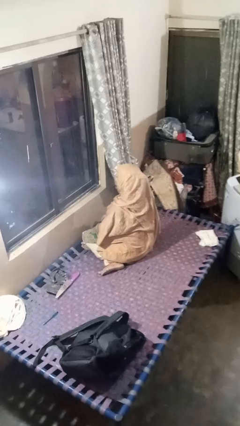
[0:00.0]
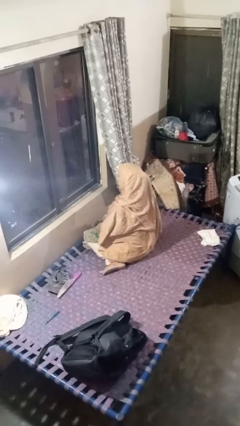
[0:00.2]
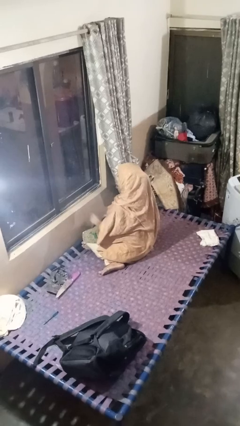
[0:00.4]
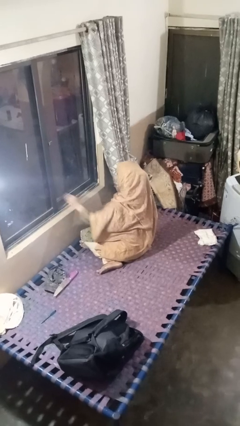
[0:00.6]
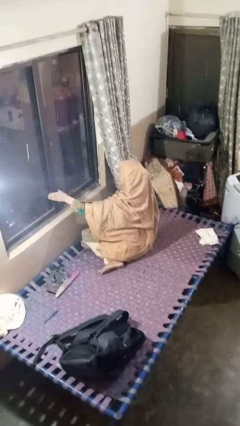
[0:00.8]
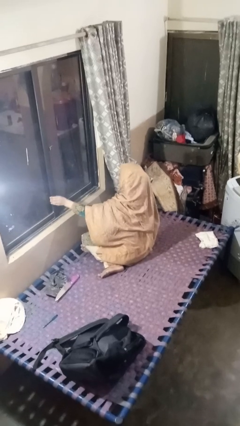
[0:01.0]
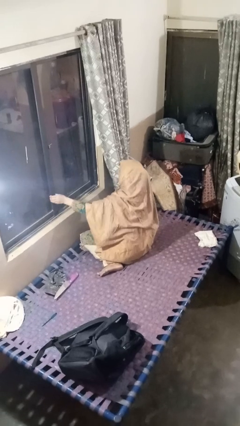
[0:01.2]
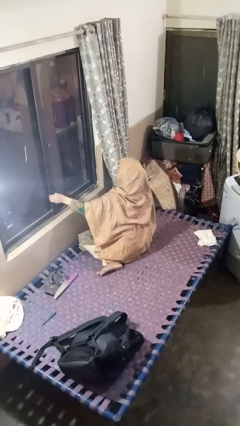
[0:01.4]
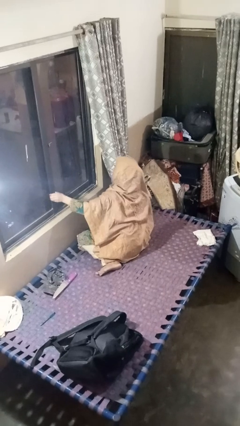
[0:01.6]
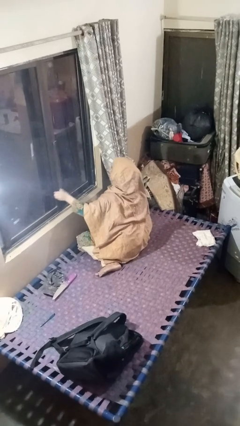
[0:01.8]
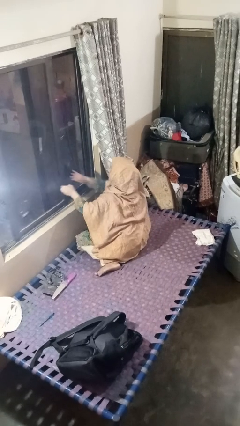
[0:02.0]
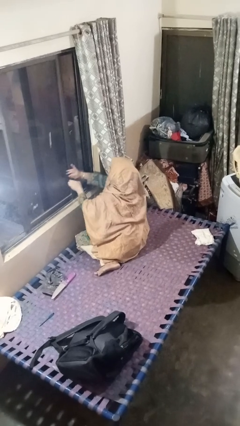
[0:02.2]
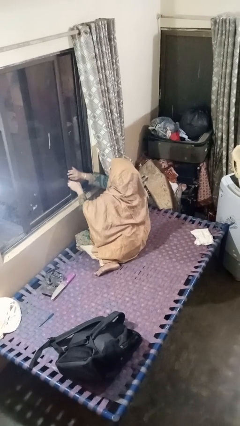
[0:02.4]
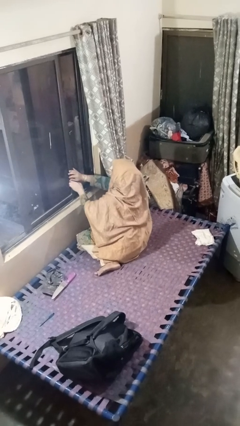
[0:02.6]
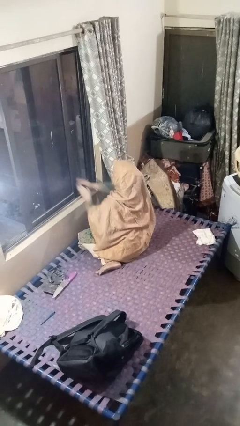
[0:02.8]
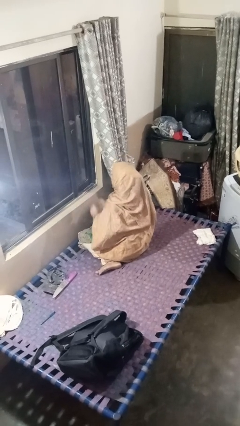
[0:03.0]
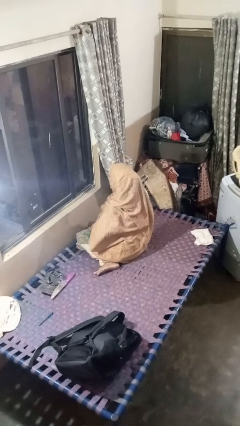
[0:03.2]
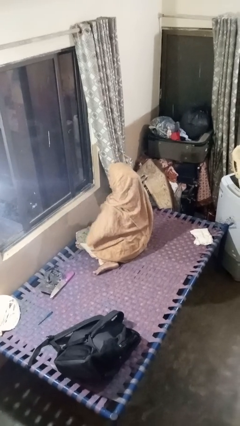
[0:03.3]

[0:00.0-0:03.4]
person opens home window

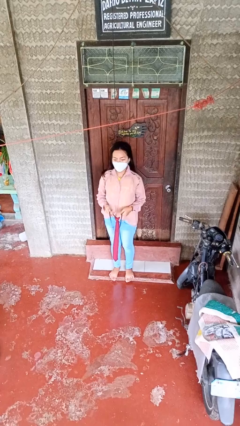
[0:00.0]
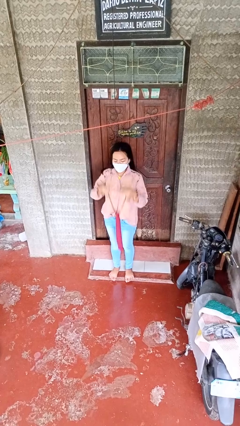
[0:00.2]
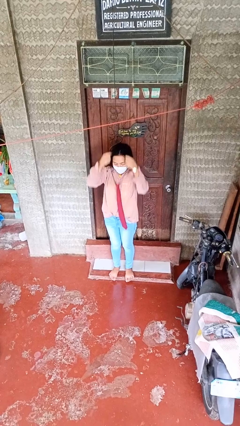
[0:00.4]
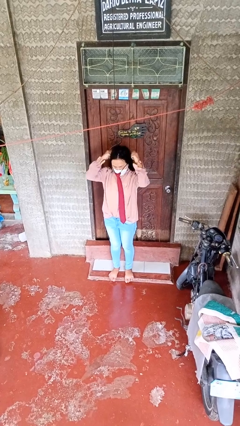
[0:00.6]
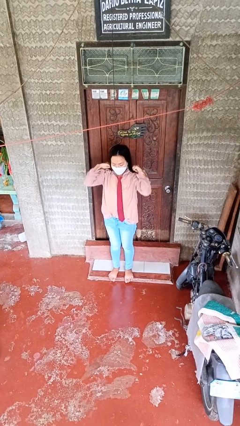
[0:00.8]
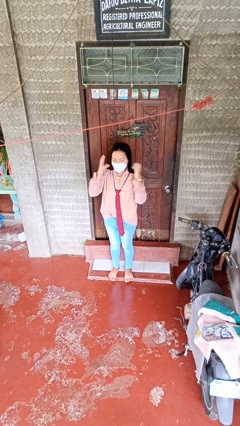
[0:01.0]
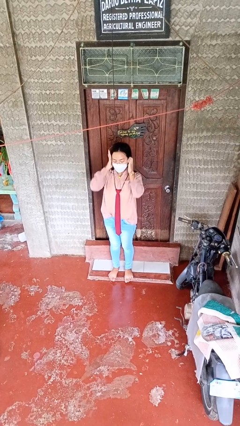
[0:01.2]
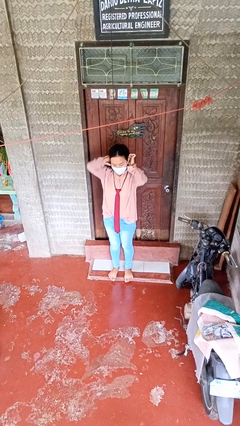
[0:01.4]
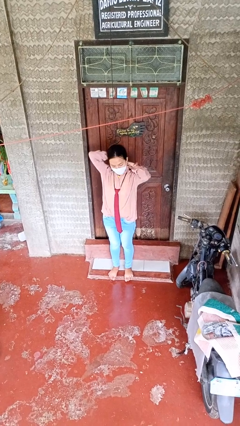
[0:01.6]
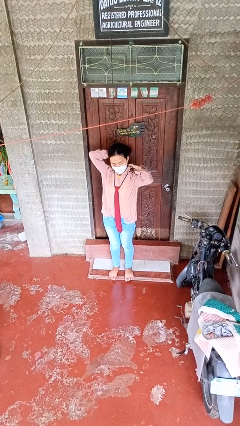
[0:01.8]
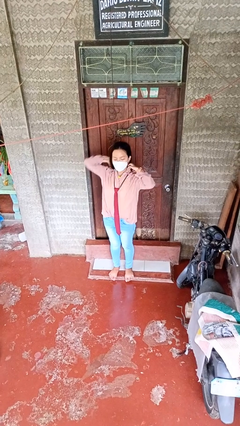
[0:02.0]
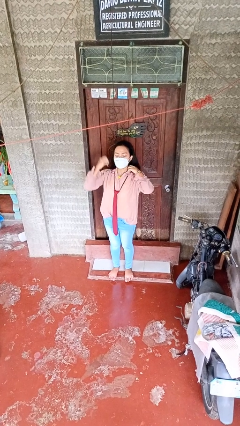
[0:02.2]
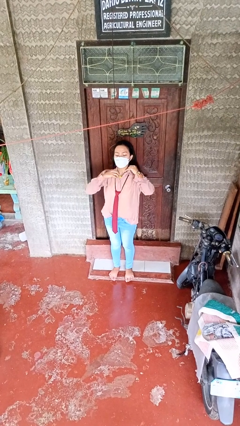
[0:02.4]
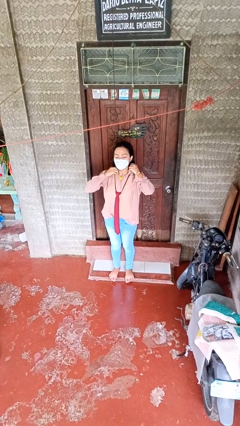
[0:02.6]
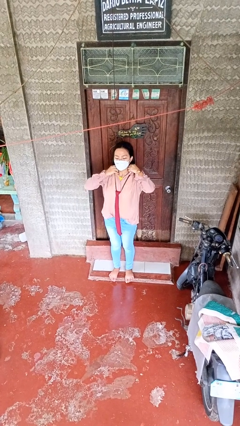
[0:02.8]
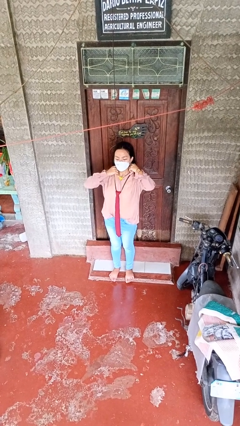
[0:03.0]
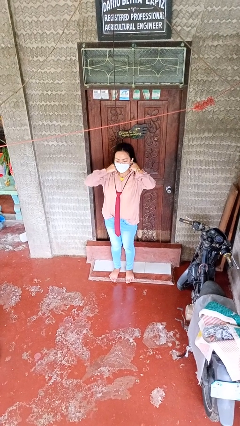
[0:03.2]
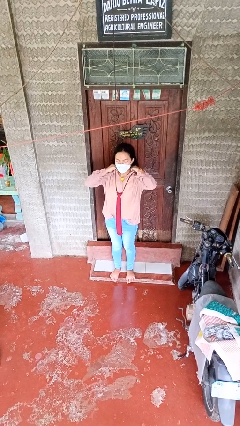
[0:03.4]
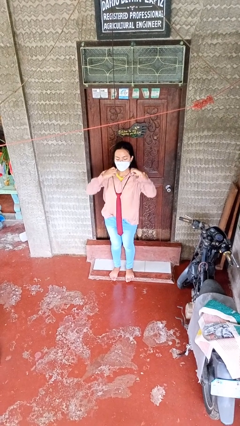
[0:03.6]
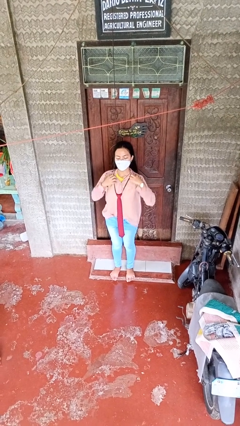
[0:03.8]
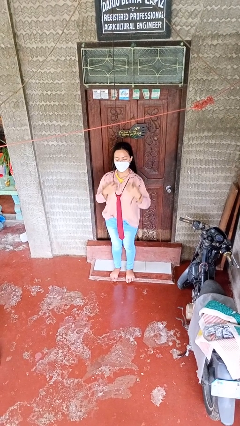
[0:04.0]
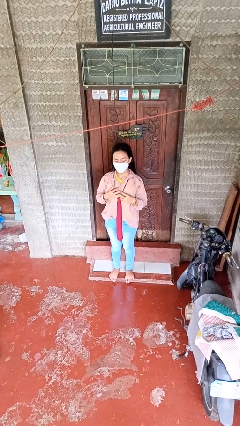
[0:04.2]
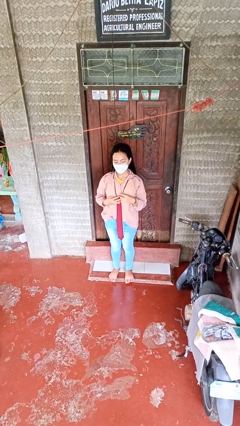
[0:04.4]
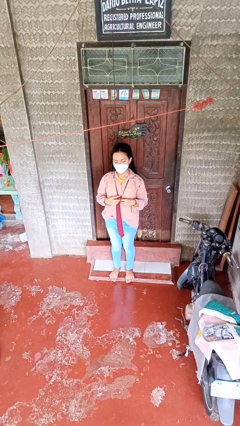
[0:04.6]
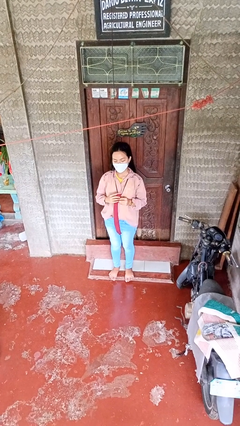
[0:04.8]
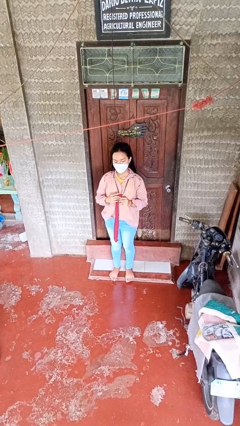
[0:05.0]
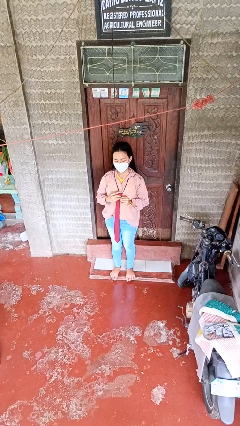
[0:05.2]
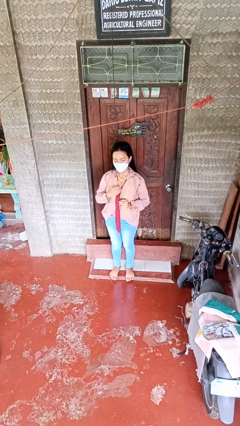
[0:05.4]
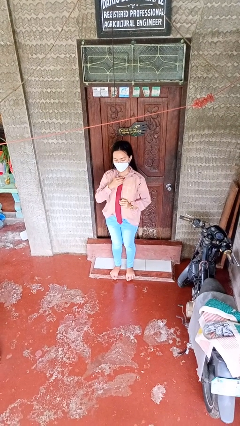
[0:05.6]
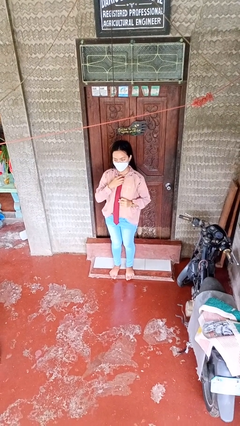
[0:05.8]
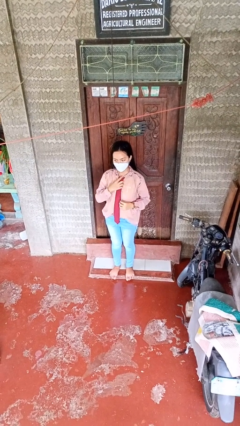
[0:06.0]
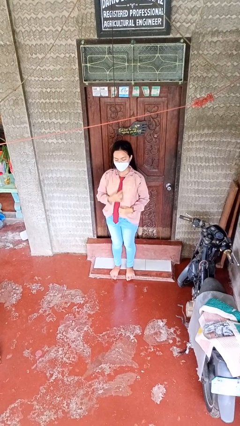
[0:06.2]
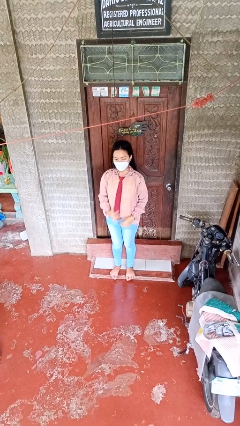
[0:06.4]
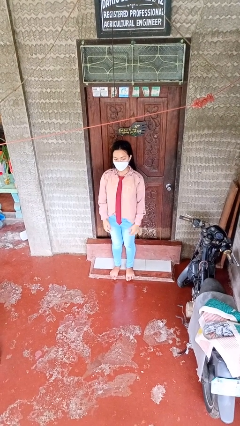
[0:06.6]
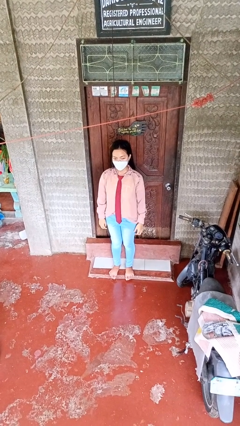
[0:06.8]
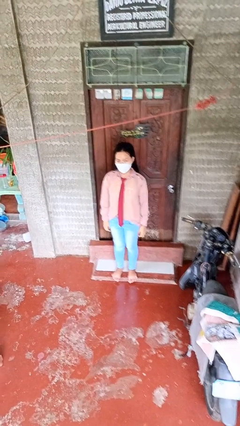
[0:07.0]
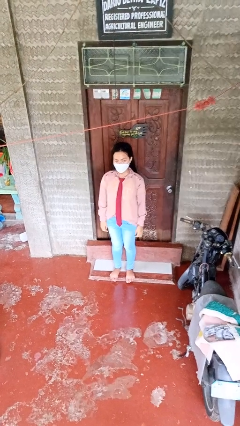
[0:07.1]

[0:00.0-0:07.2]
person puts on necktie

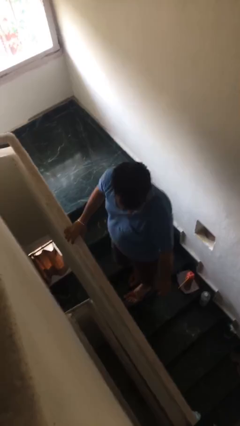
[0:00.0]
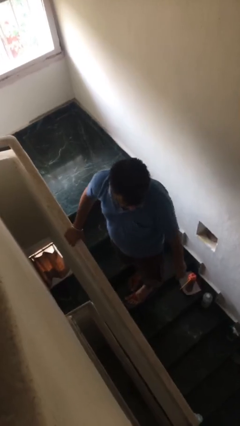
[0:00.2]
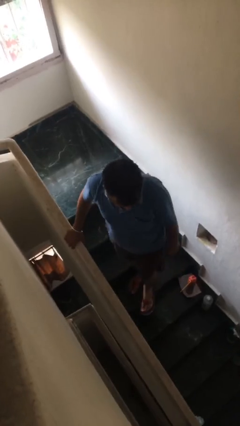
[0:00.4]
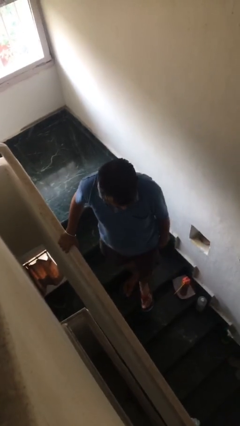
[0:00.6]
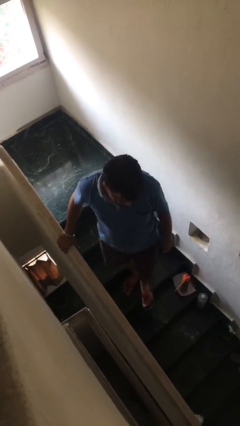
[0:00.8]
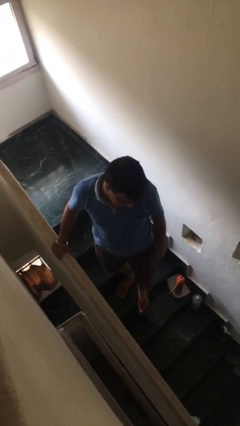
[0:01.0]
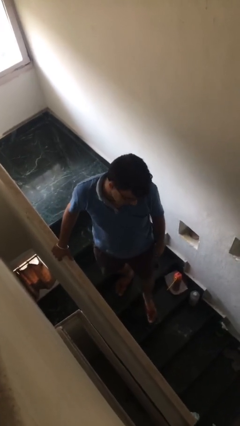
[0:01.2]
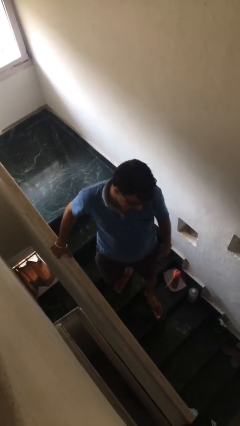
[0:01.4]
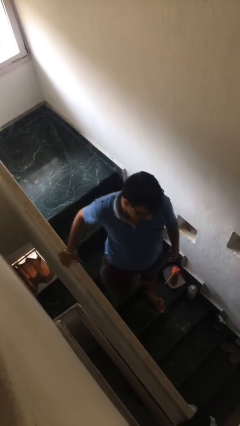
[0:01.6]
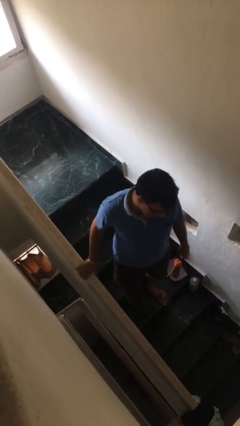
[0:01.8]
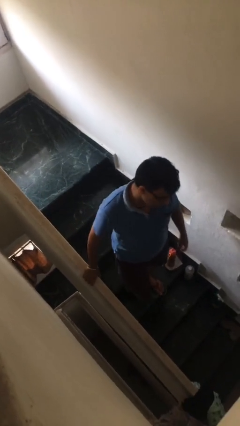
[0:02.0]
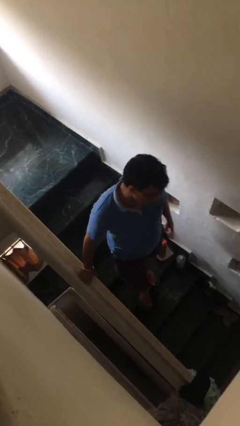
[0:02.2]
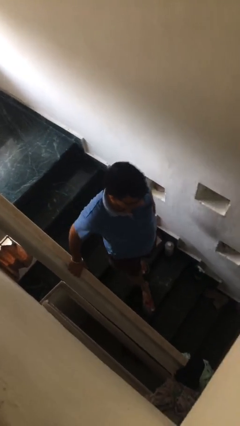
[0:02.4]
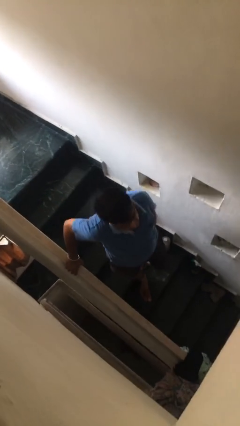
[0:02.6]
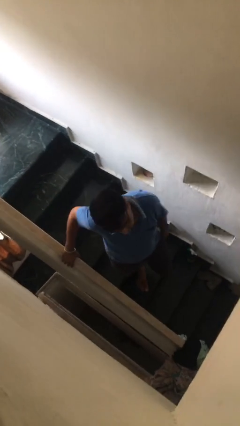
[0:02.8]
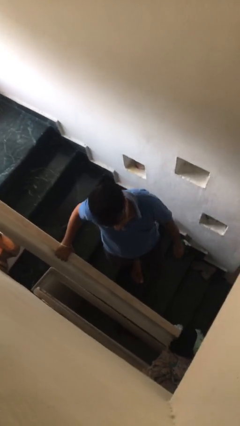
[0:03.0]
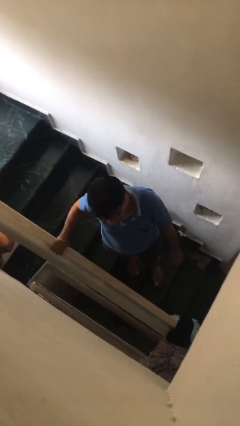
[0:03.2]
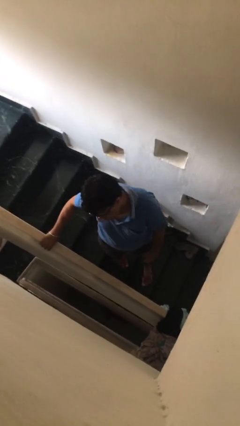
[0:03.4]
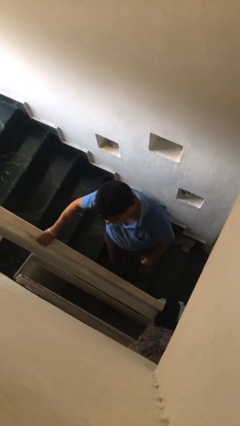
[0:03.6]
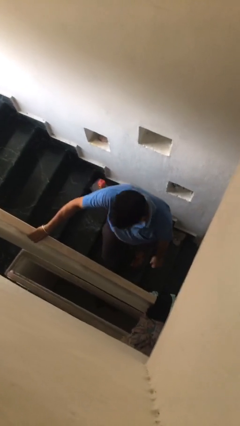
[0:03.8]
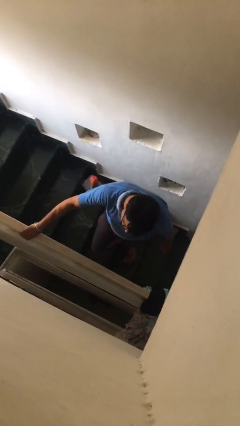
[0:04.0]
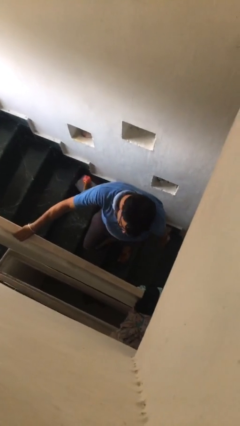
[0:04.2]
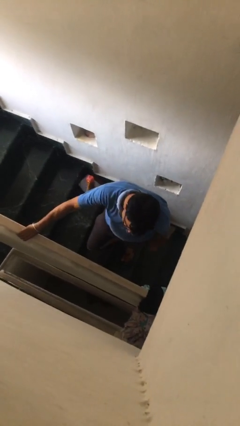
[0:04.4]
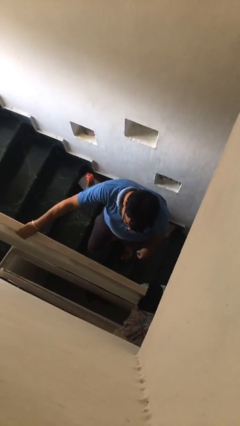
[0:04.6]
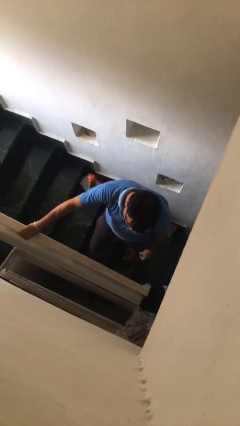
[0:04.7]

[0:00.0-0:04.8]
person climbs down stairs

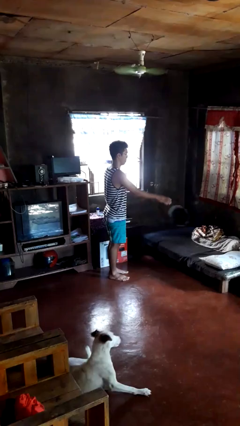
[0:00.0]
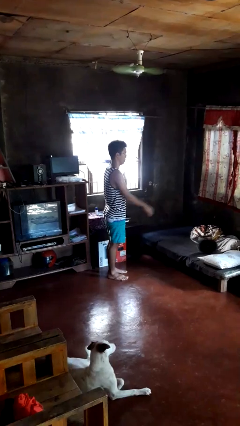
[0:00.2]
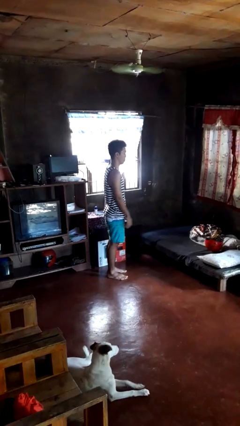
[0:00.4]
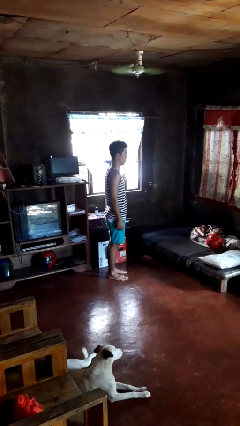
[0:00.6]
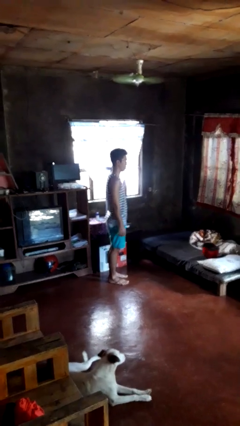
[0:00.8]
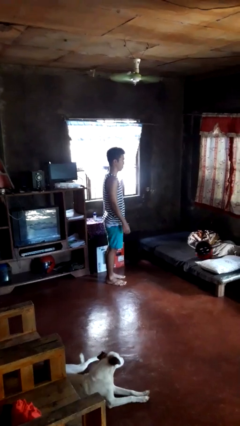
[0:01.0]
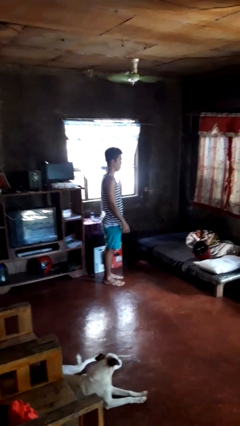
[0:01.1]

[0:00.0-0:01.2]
person throws object on bed

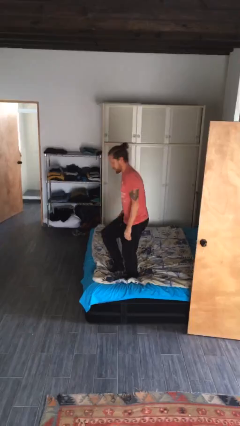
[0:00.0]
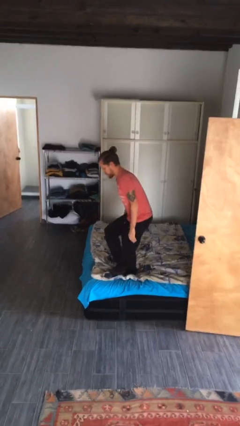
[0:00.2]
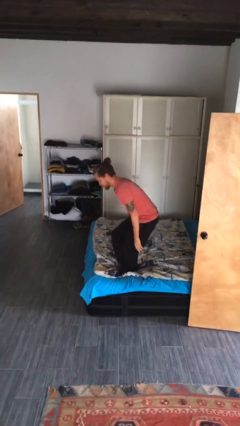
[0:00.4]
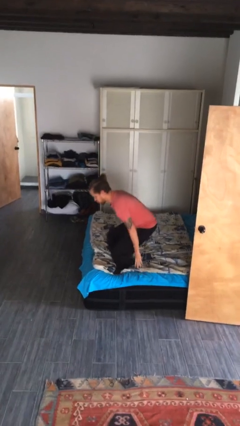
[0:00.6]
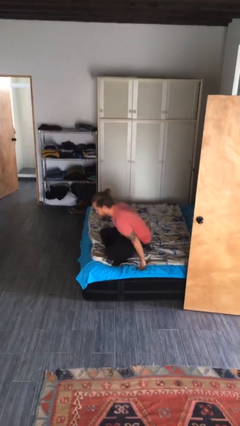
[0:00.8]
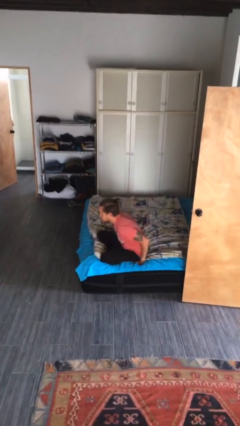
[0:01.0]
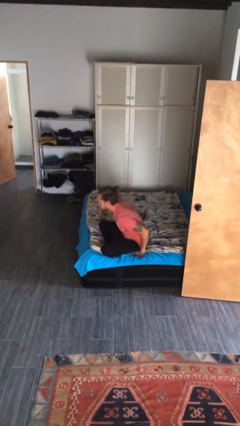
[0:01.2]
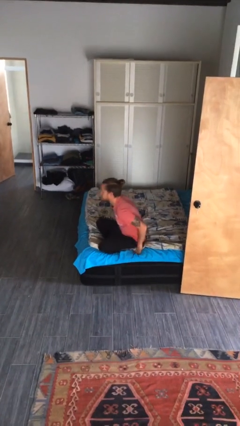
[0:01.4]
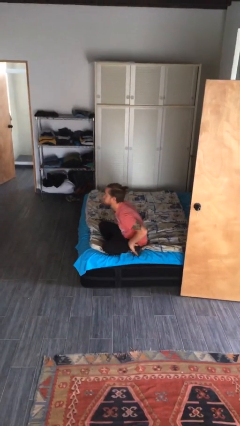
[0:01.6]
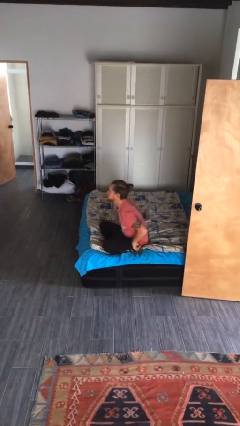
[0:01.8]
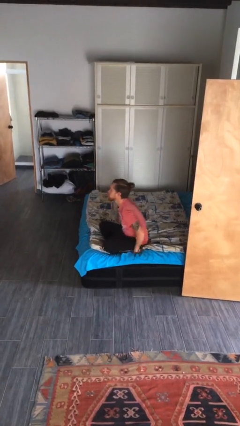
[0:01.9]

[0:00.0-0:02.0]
person sits crisscross
